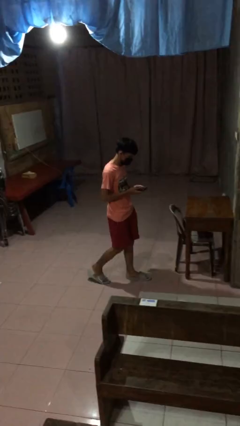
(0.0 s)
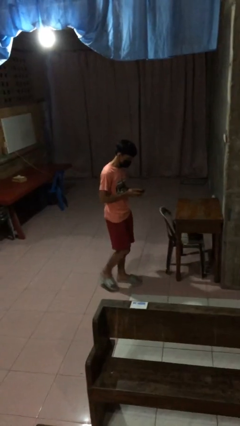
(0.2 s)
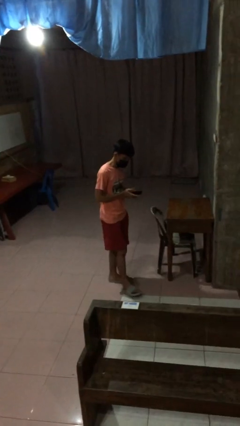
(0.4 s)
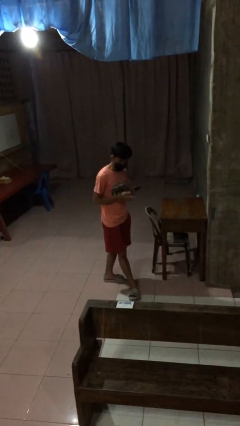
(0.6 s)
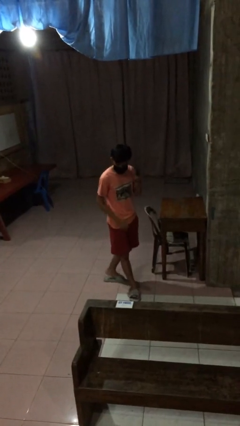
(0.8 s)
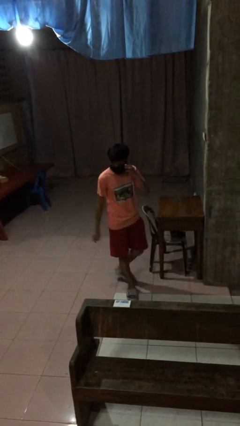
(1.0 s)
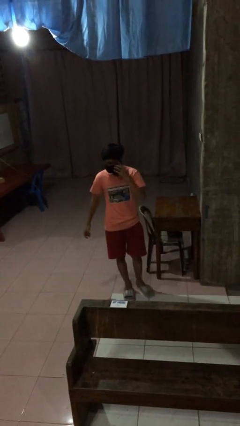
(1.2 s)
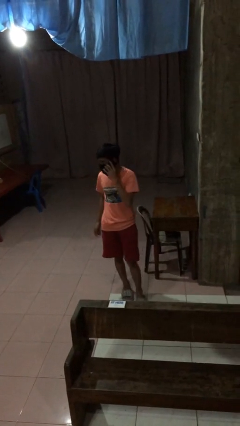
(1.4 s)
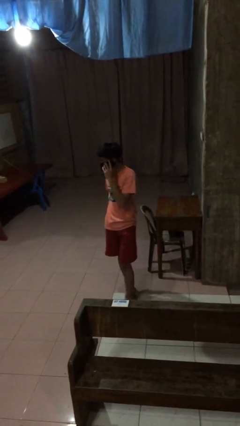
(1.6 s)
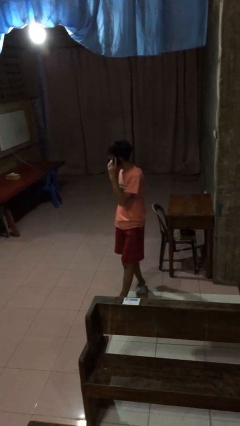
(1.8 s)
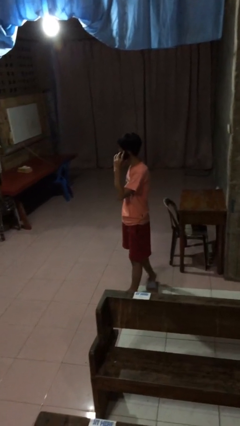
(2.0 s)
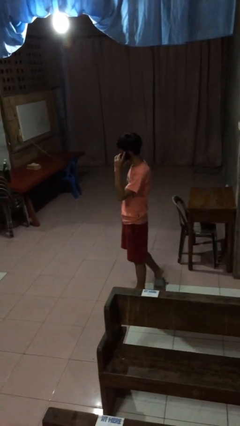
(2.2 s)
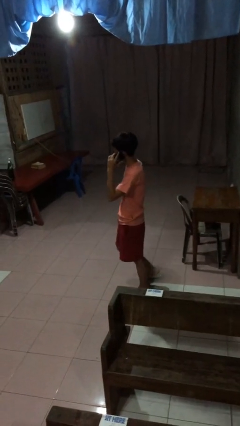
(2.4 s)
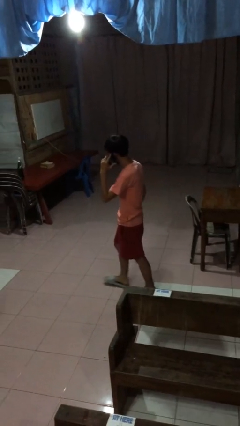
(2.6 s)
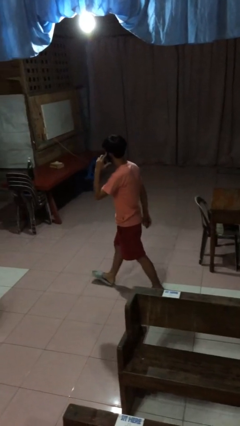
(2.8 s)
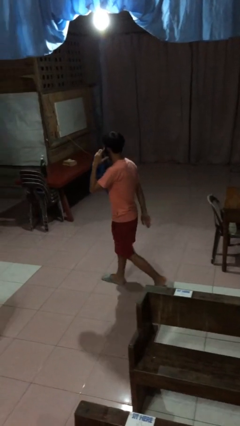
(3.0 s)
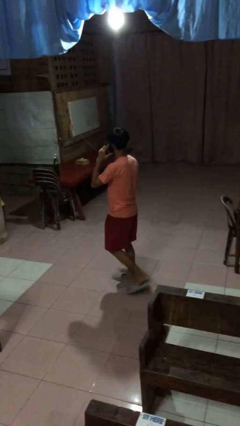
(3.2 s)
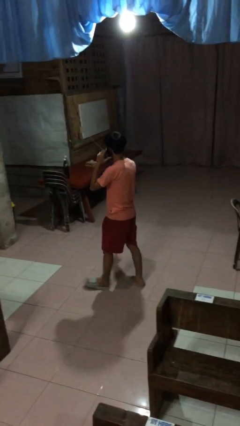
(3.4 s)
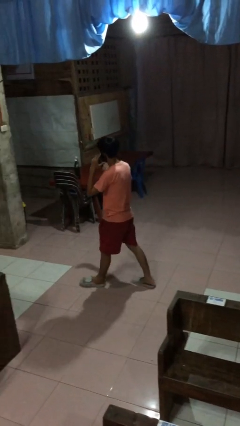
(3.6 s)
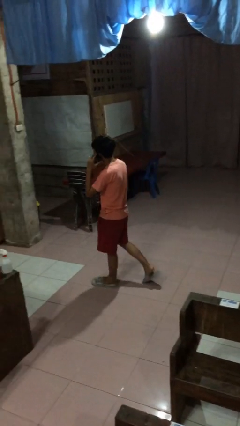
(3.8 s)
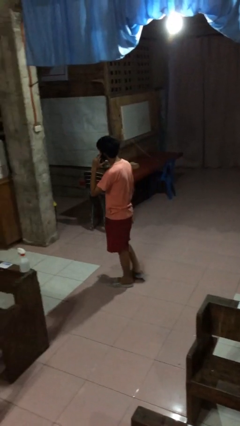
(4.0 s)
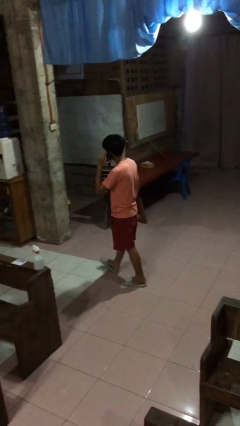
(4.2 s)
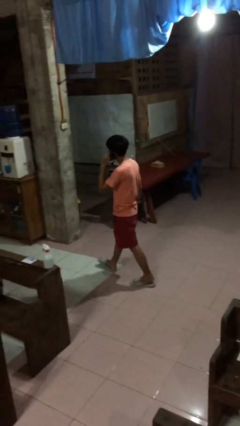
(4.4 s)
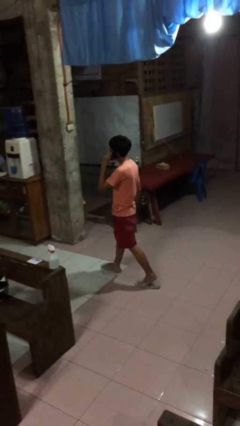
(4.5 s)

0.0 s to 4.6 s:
person talks on phone

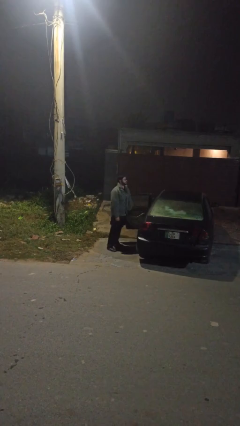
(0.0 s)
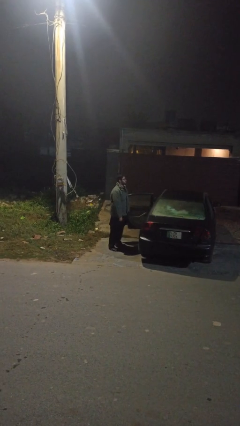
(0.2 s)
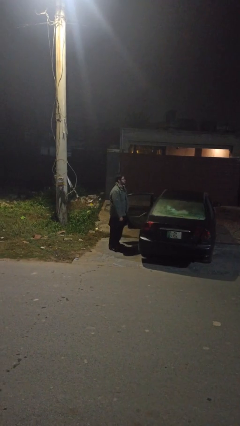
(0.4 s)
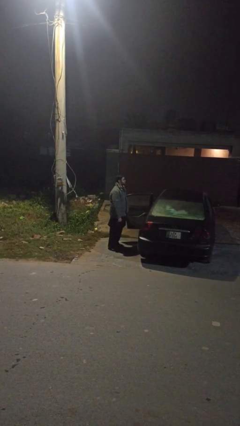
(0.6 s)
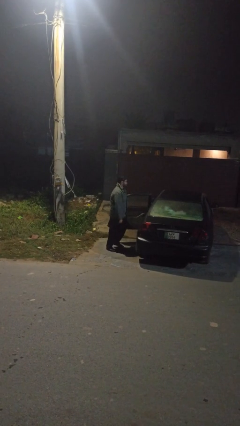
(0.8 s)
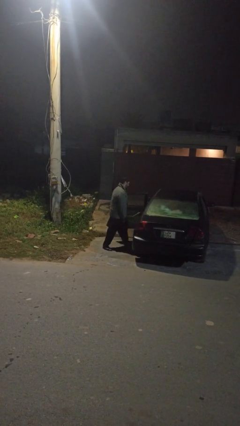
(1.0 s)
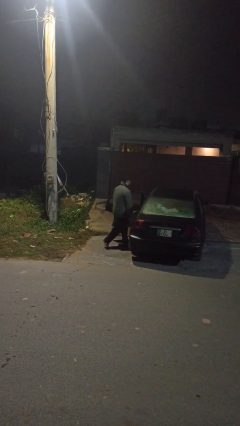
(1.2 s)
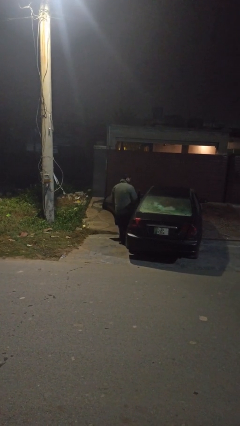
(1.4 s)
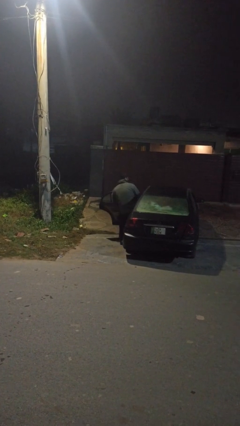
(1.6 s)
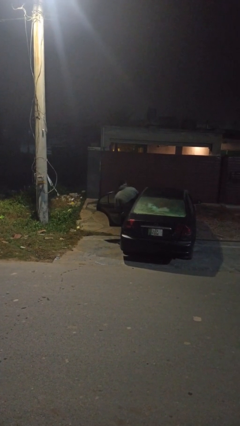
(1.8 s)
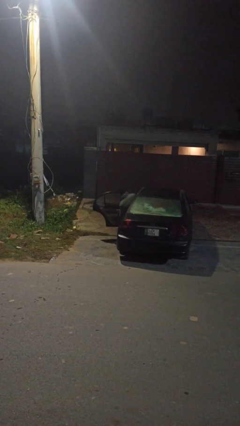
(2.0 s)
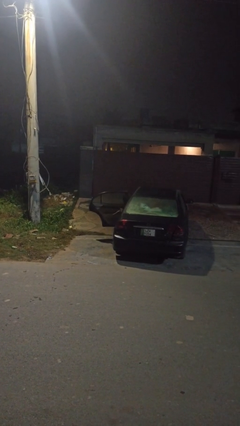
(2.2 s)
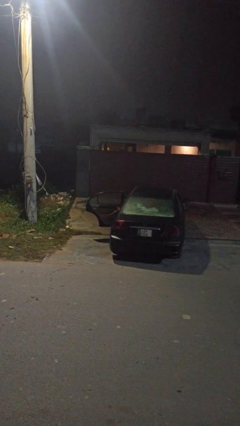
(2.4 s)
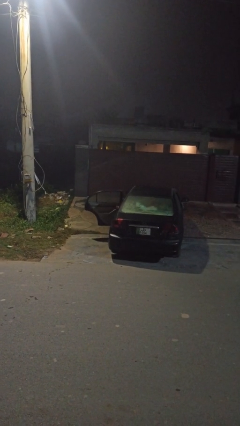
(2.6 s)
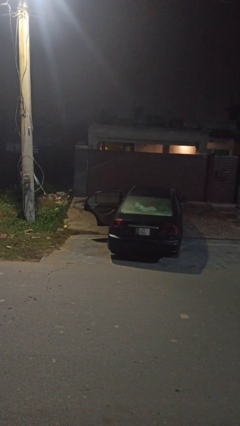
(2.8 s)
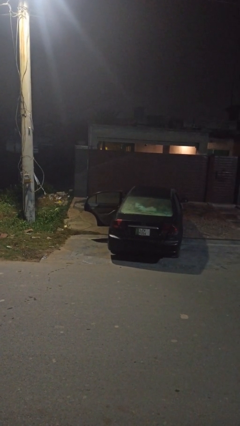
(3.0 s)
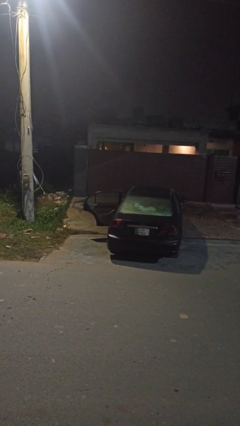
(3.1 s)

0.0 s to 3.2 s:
person enters car

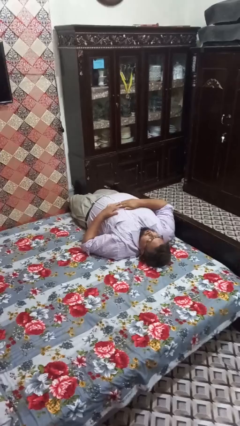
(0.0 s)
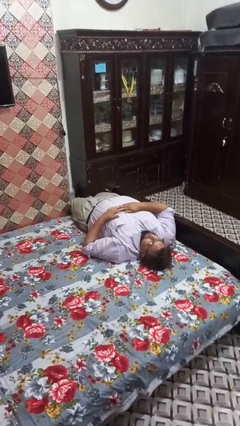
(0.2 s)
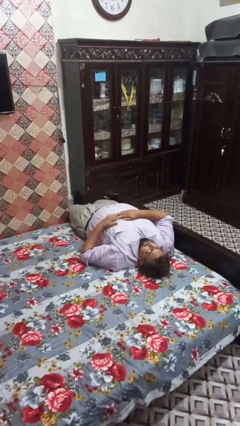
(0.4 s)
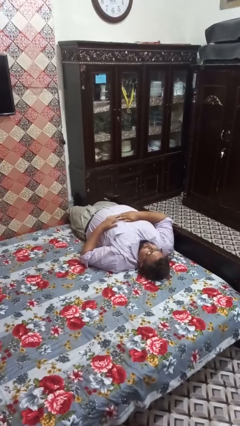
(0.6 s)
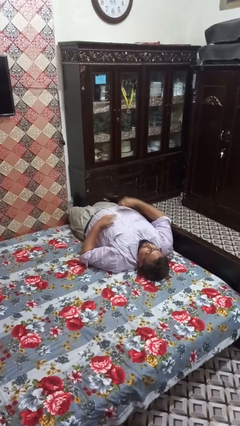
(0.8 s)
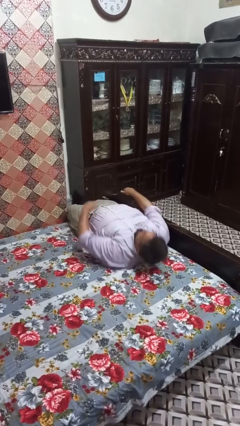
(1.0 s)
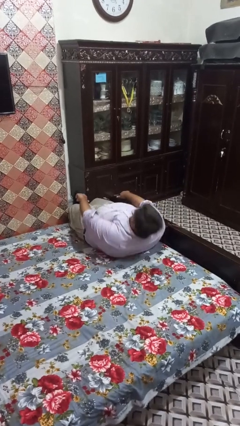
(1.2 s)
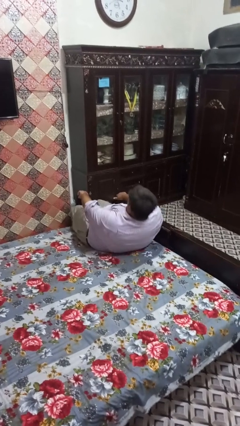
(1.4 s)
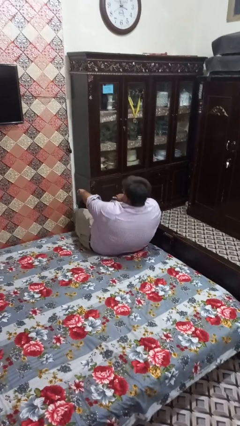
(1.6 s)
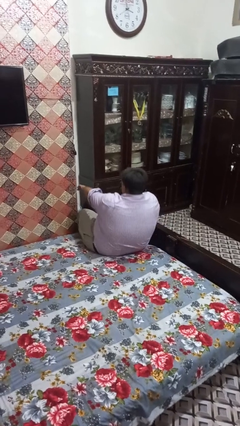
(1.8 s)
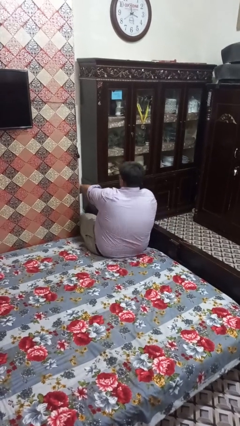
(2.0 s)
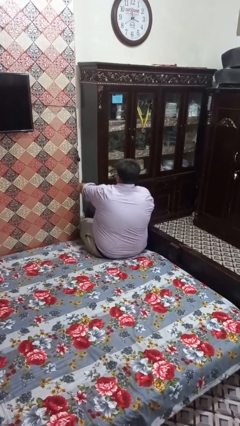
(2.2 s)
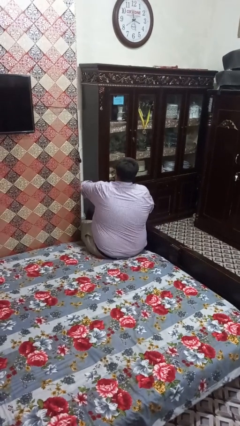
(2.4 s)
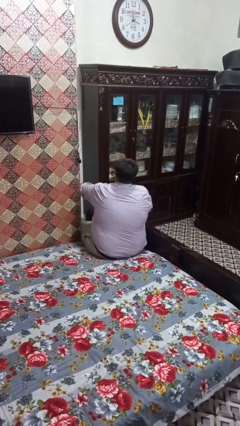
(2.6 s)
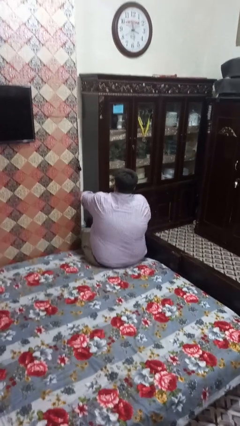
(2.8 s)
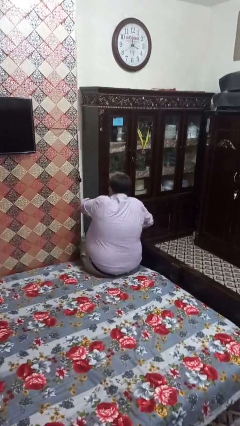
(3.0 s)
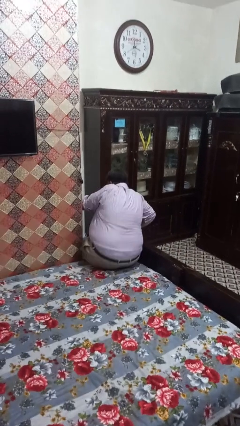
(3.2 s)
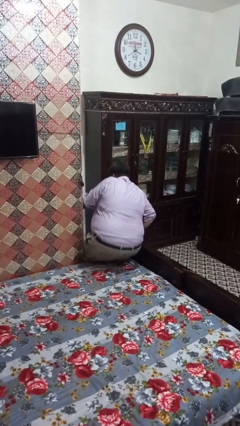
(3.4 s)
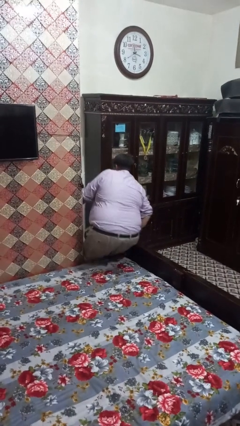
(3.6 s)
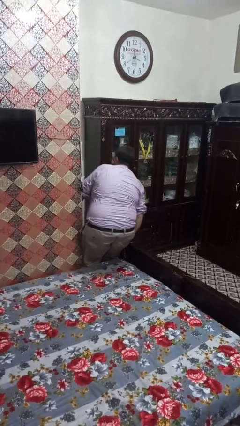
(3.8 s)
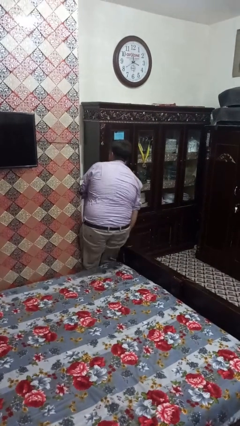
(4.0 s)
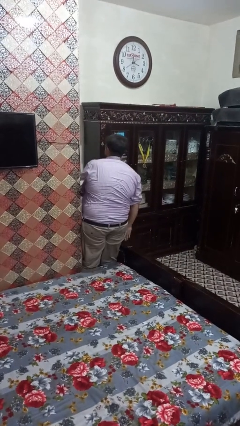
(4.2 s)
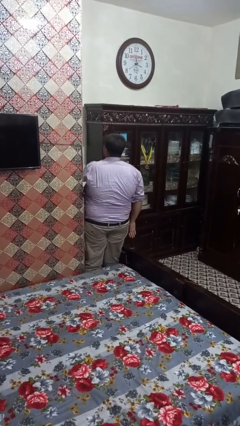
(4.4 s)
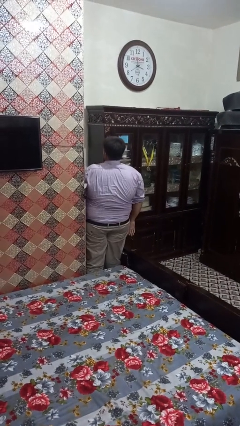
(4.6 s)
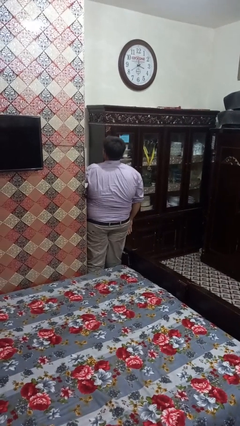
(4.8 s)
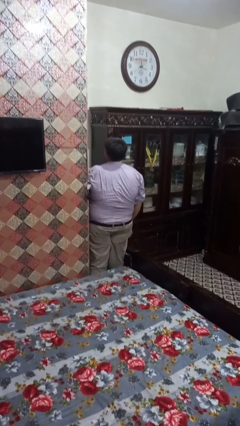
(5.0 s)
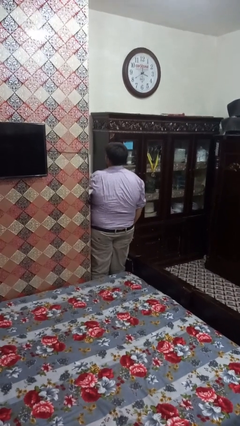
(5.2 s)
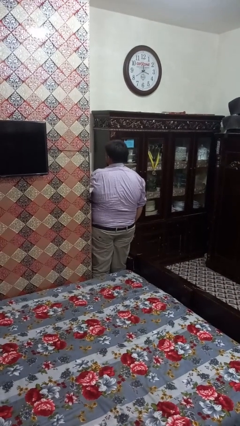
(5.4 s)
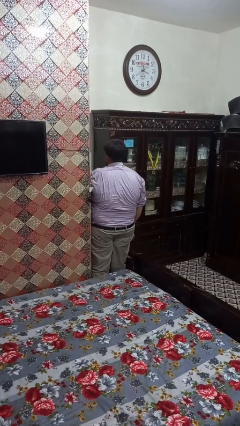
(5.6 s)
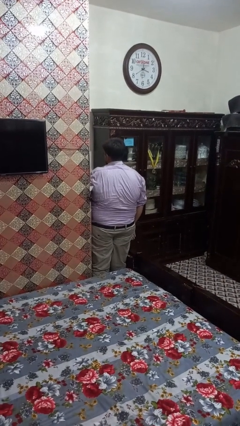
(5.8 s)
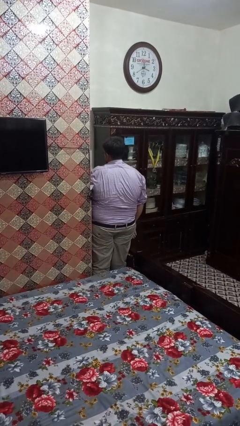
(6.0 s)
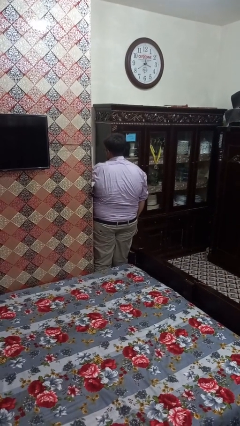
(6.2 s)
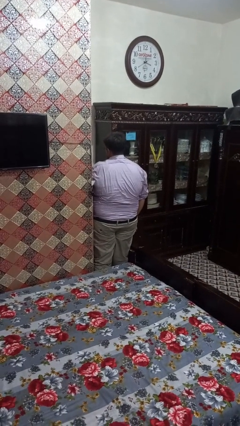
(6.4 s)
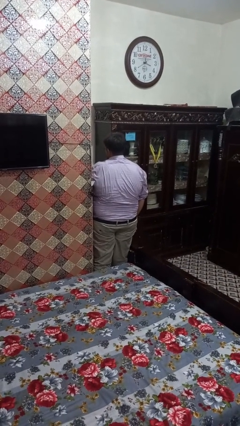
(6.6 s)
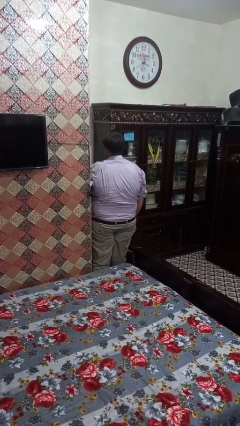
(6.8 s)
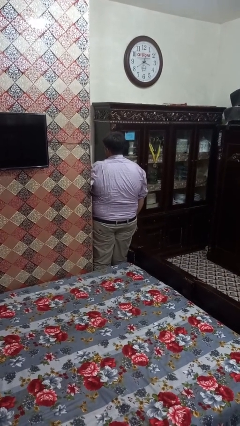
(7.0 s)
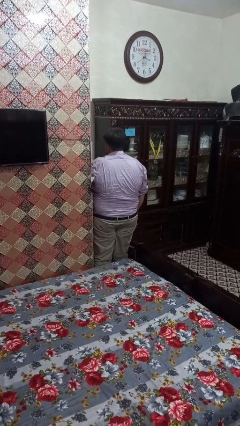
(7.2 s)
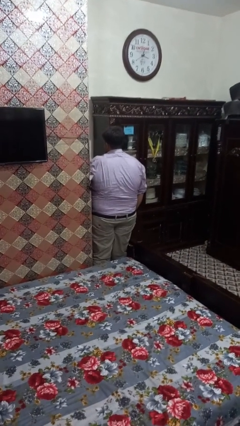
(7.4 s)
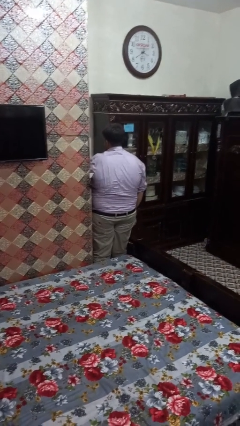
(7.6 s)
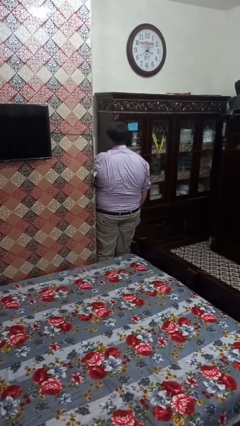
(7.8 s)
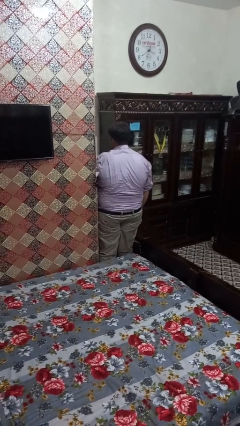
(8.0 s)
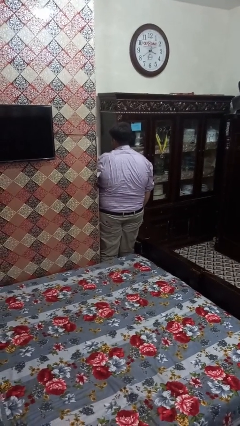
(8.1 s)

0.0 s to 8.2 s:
person stands up

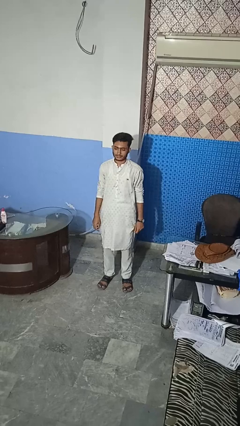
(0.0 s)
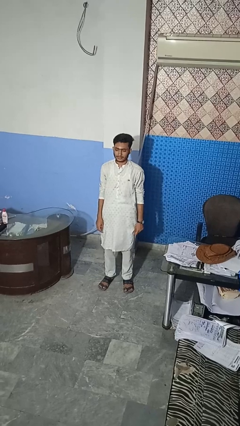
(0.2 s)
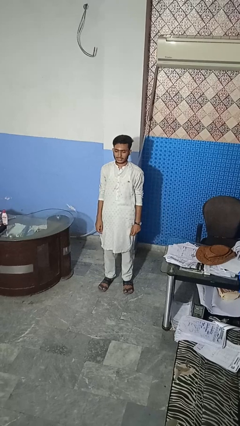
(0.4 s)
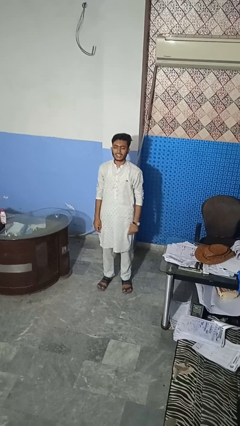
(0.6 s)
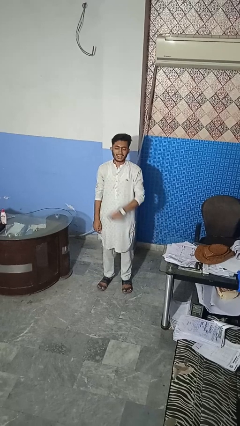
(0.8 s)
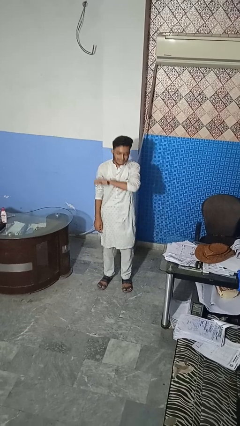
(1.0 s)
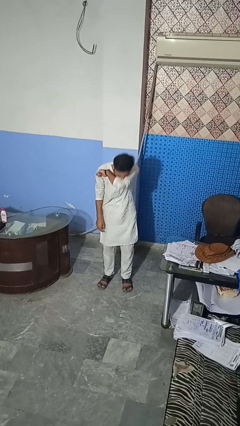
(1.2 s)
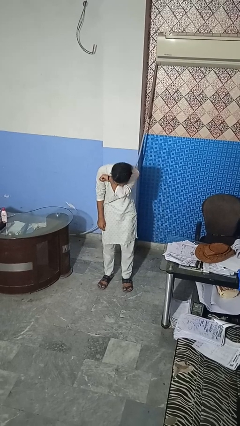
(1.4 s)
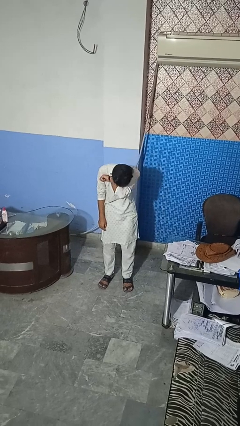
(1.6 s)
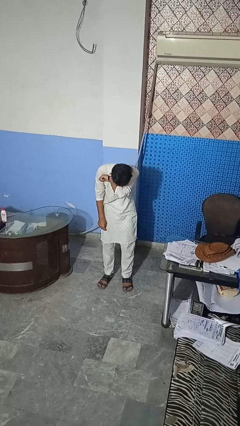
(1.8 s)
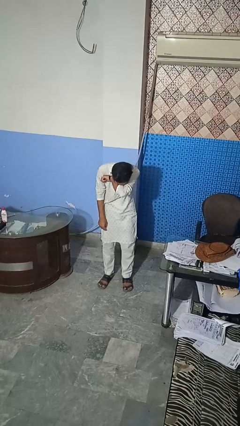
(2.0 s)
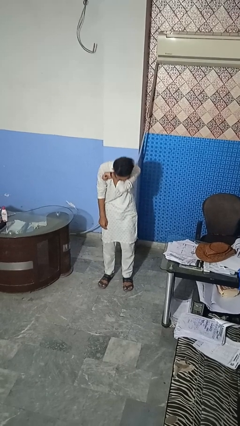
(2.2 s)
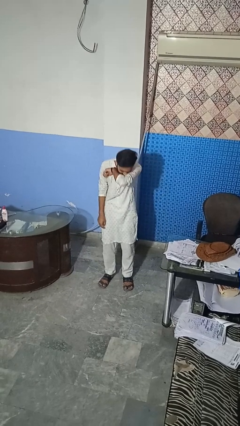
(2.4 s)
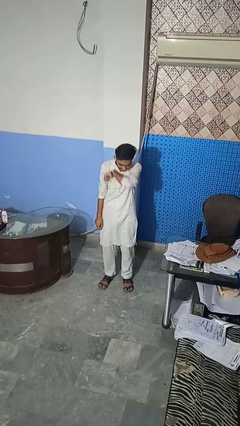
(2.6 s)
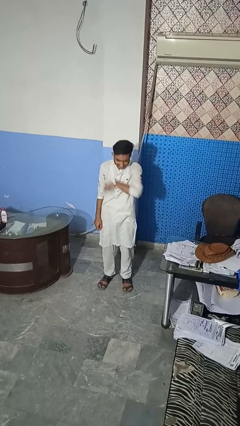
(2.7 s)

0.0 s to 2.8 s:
person sneezes into arm
